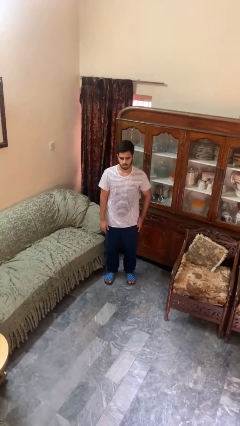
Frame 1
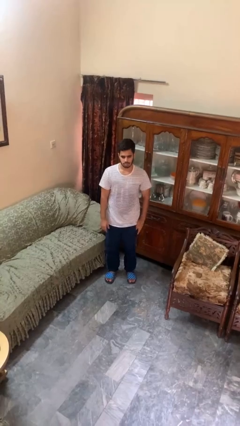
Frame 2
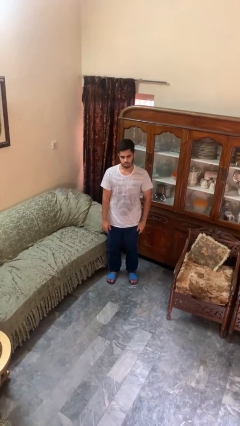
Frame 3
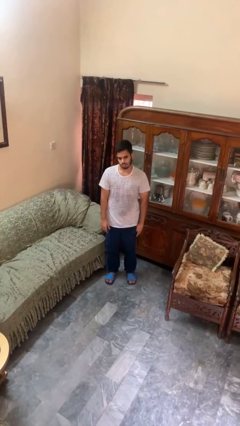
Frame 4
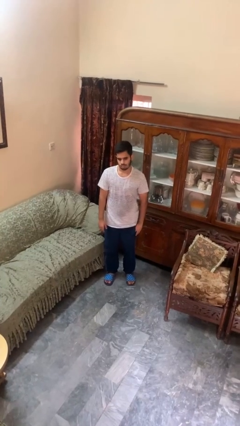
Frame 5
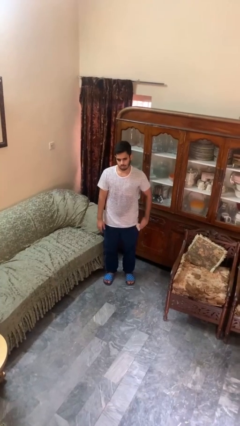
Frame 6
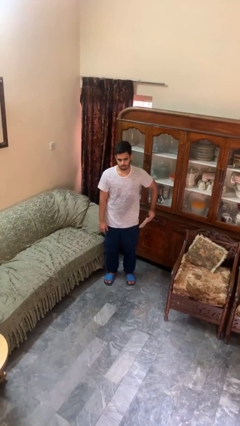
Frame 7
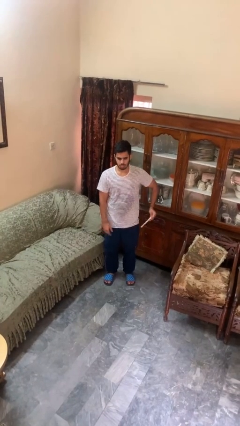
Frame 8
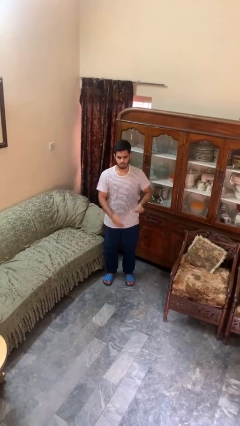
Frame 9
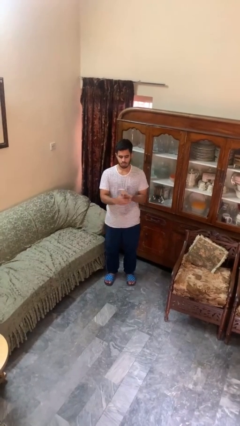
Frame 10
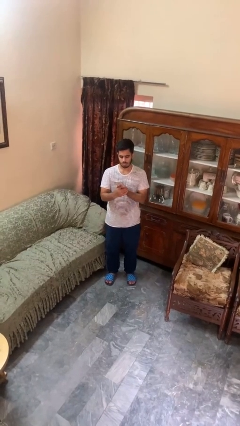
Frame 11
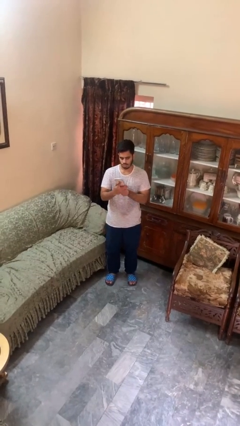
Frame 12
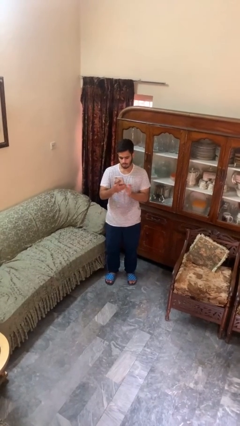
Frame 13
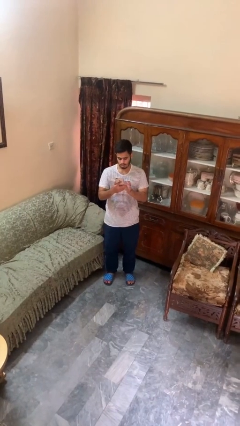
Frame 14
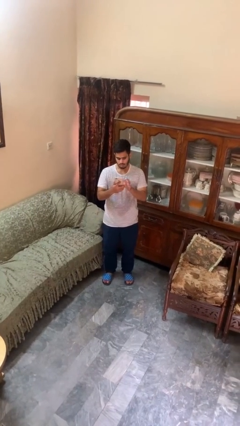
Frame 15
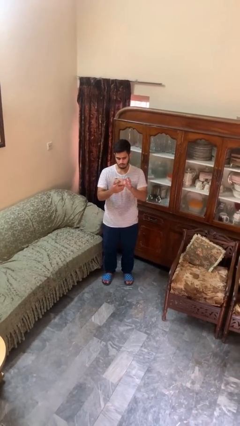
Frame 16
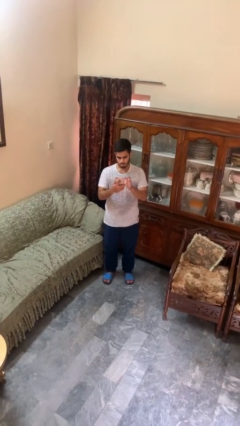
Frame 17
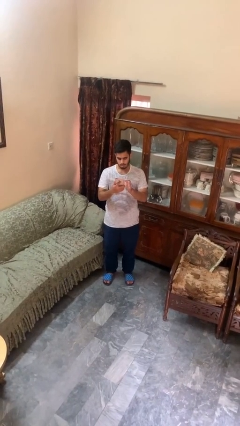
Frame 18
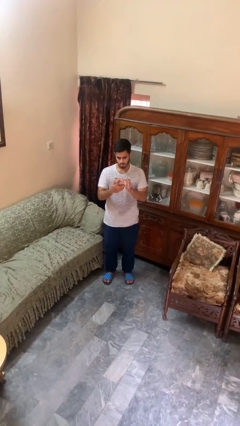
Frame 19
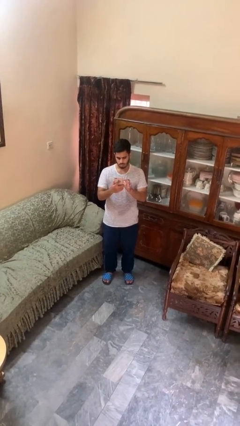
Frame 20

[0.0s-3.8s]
person takes phone from pocket

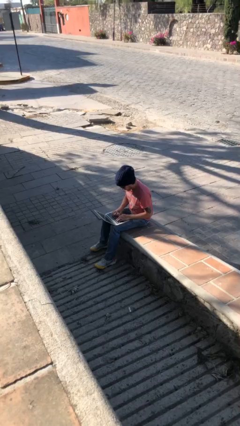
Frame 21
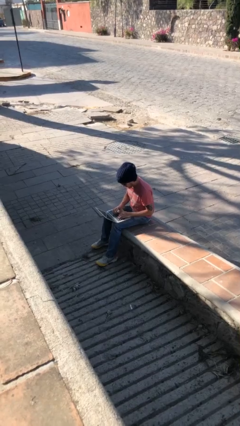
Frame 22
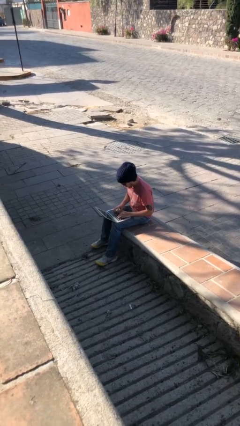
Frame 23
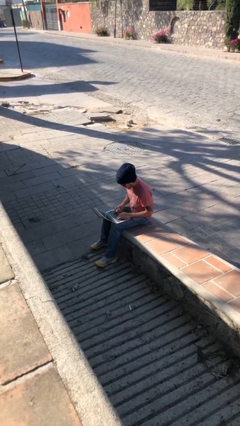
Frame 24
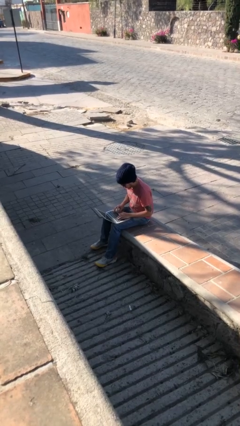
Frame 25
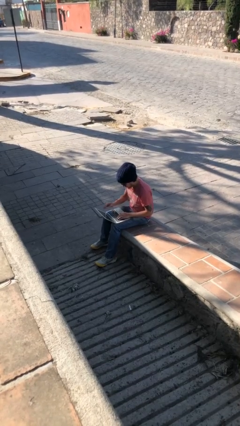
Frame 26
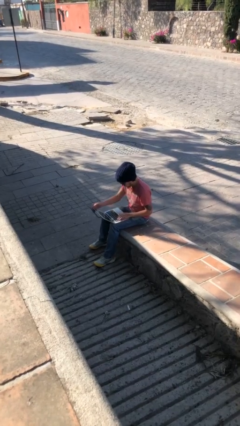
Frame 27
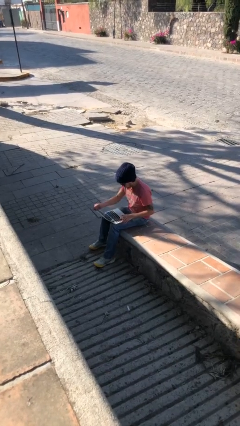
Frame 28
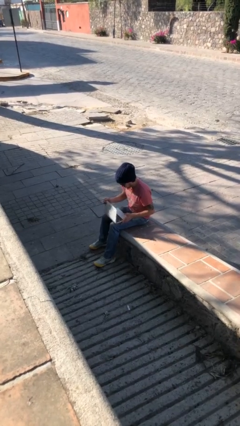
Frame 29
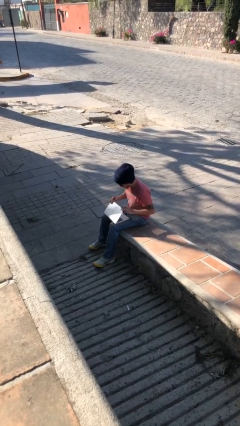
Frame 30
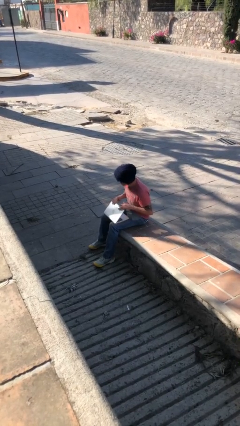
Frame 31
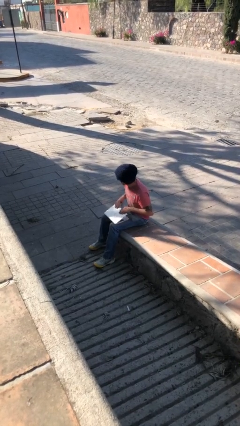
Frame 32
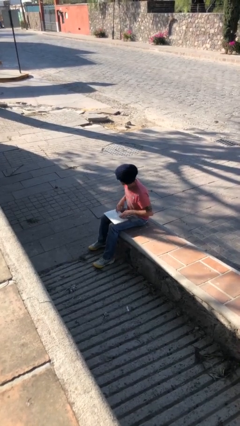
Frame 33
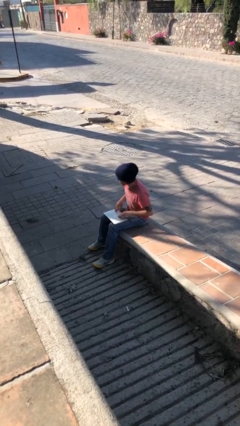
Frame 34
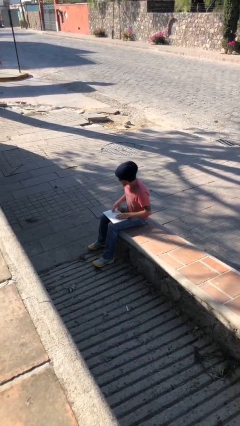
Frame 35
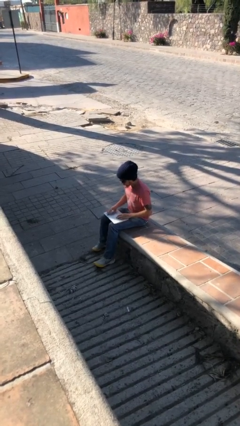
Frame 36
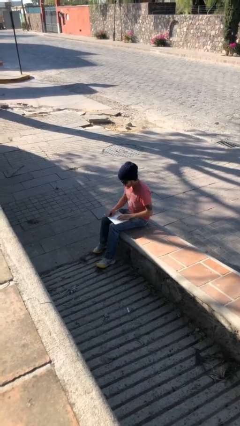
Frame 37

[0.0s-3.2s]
person interacts with laptop

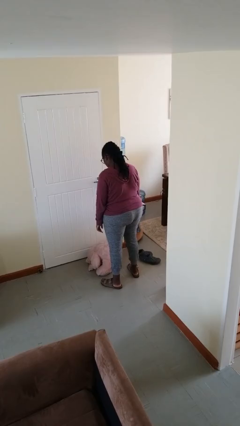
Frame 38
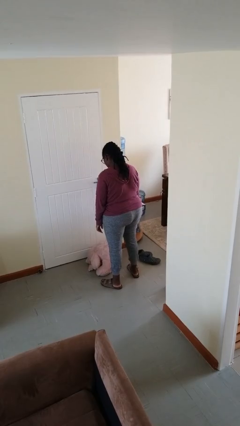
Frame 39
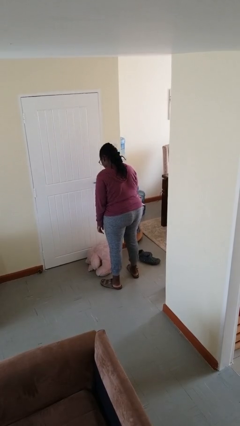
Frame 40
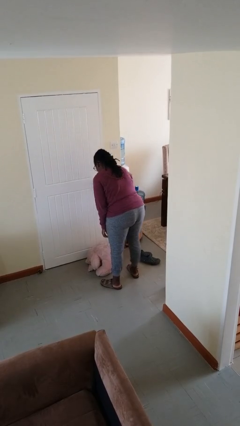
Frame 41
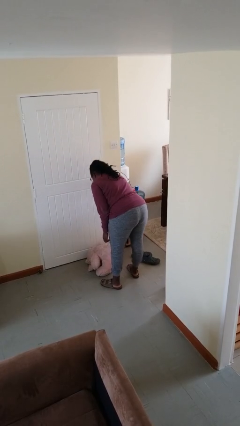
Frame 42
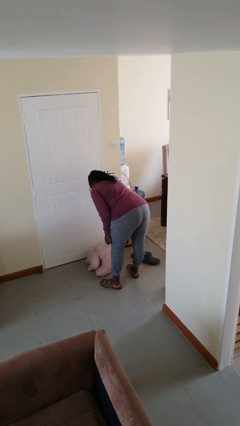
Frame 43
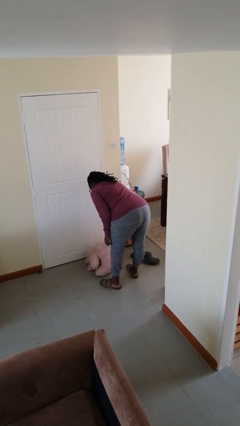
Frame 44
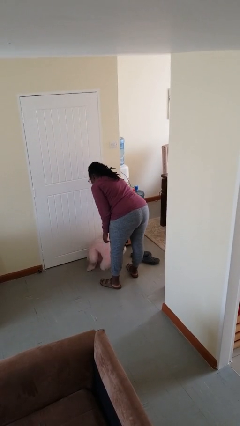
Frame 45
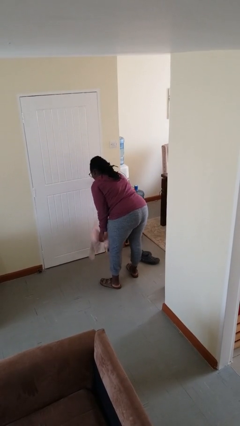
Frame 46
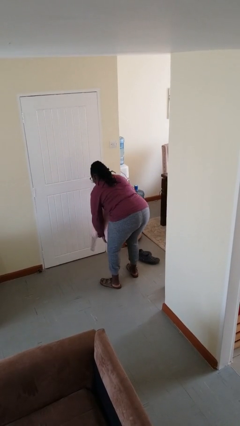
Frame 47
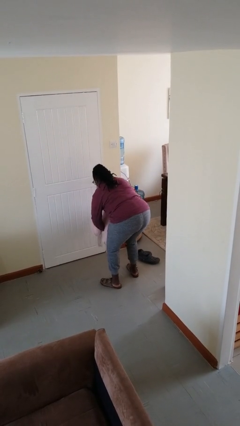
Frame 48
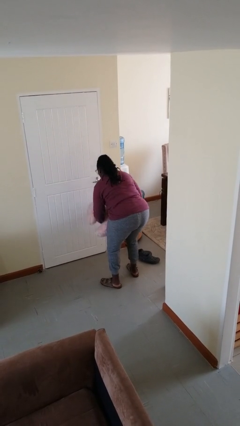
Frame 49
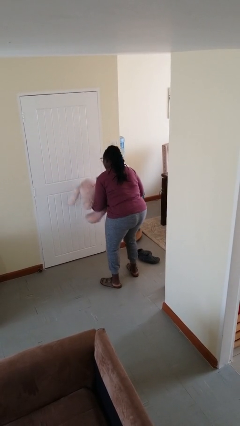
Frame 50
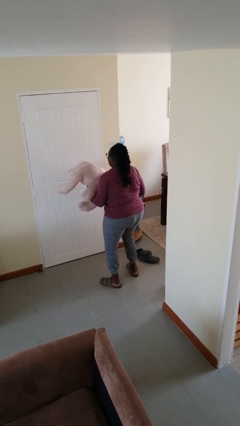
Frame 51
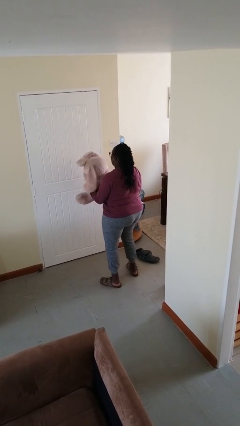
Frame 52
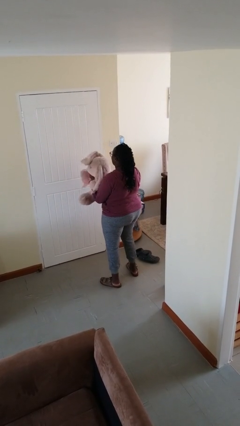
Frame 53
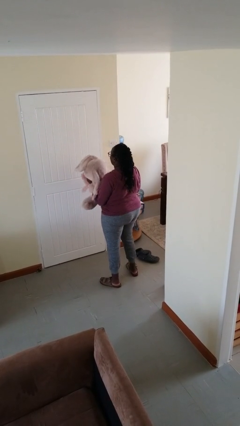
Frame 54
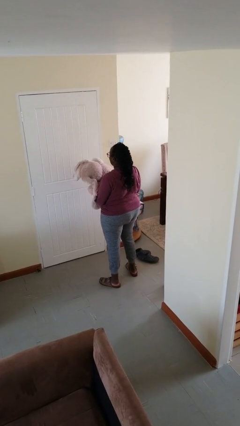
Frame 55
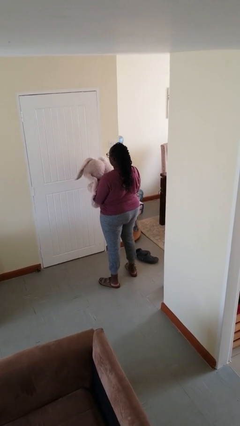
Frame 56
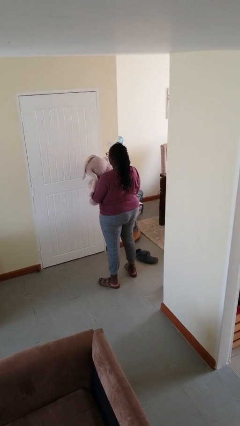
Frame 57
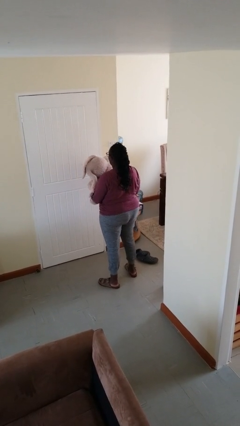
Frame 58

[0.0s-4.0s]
person picks up object from floor

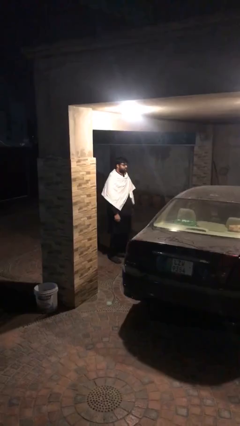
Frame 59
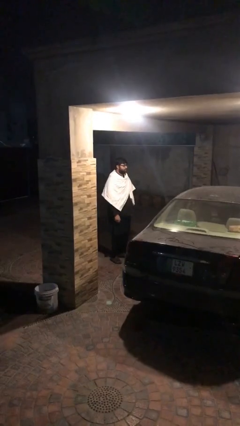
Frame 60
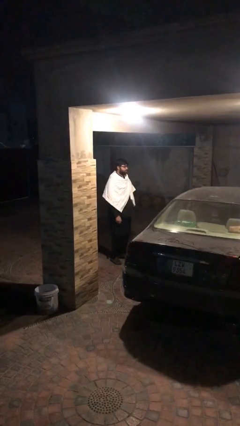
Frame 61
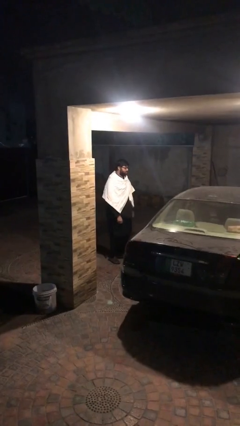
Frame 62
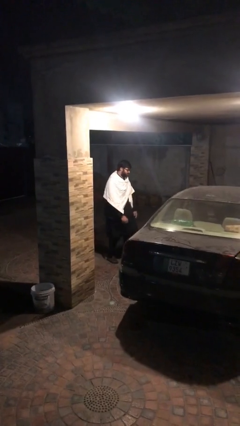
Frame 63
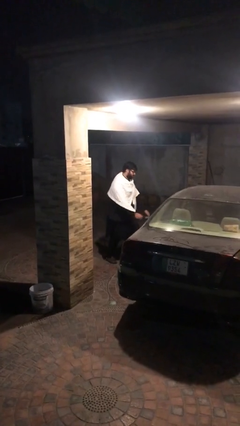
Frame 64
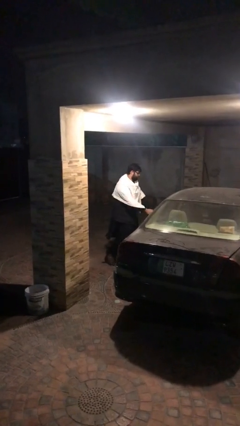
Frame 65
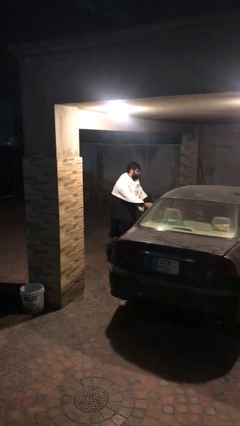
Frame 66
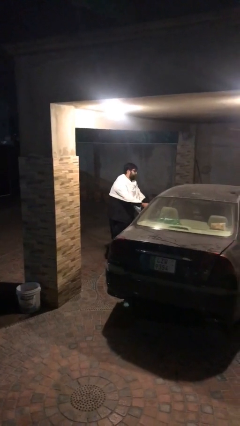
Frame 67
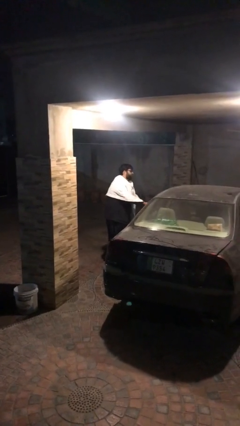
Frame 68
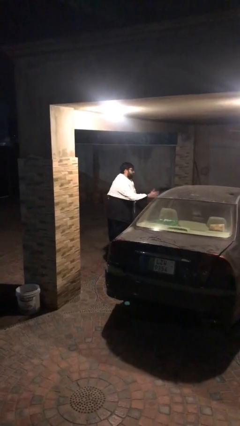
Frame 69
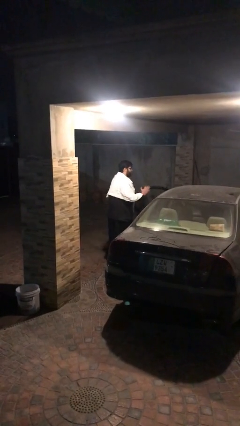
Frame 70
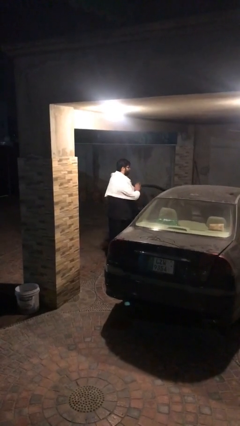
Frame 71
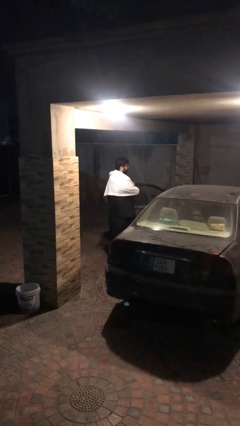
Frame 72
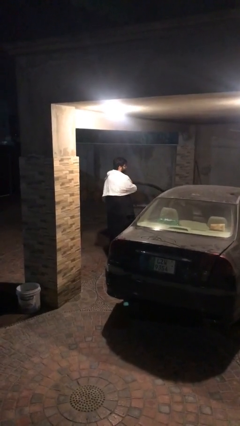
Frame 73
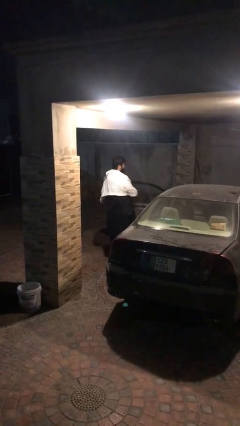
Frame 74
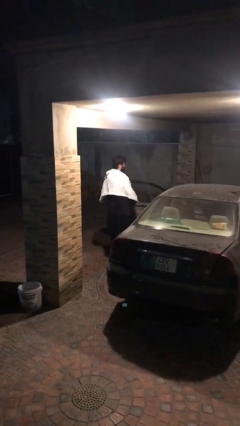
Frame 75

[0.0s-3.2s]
person opens car door

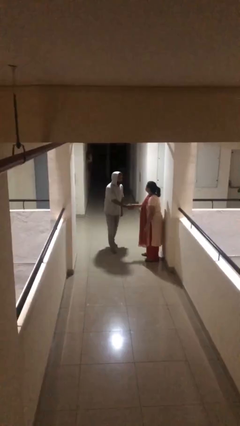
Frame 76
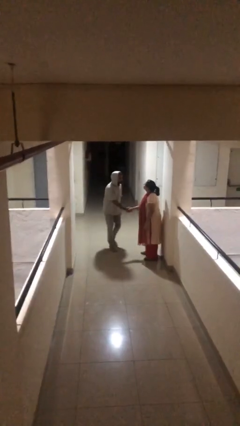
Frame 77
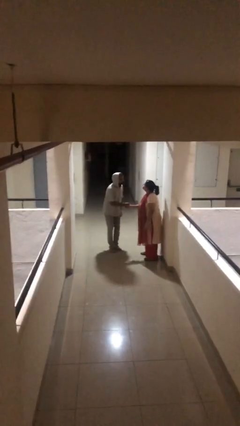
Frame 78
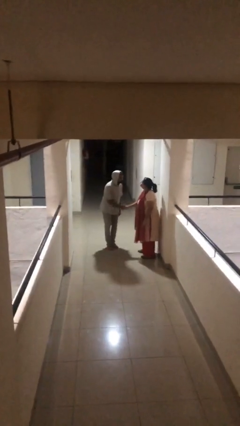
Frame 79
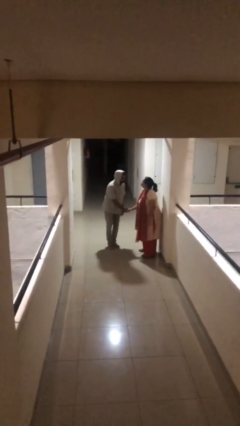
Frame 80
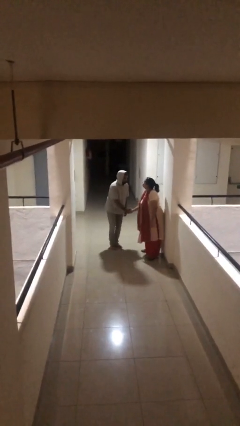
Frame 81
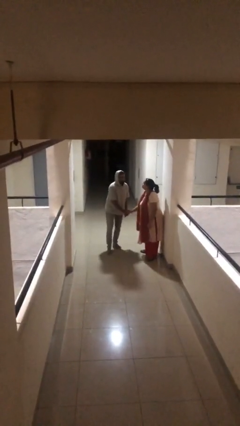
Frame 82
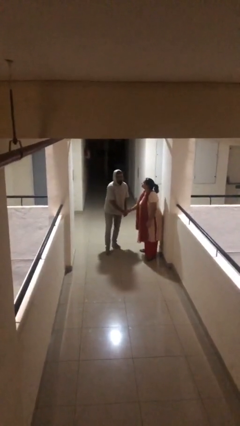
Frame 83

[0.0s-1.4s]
person shakes hand

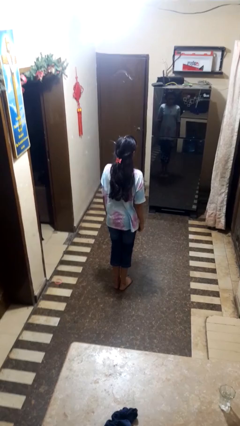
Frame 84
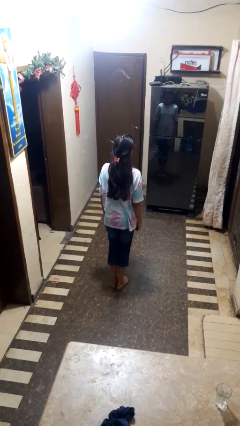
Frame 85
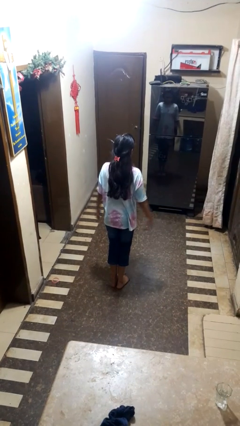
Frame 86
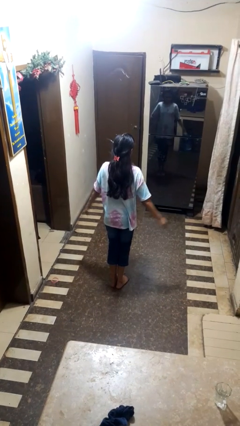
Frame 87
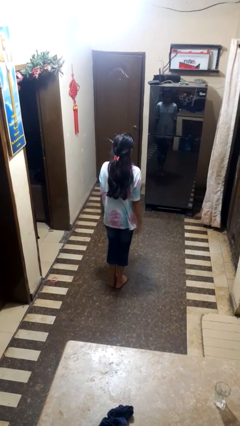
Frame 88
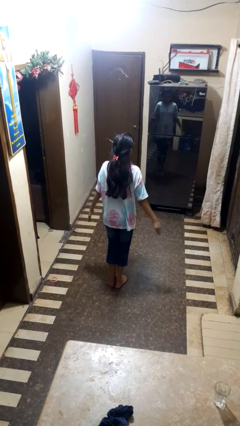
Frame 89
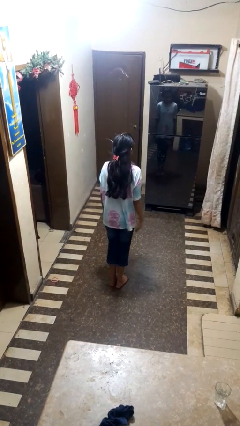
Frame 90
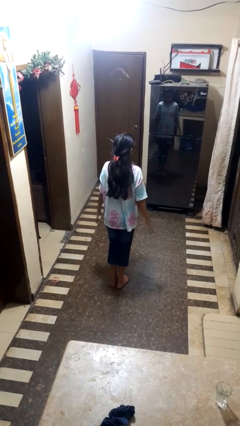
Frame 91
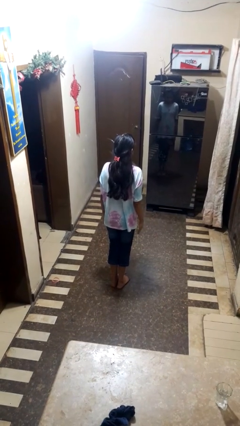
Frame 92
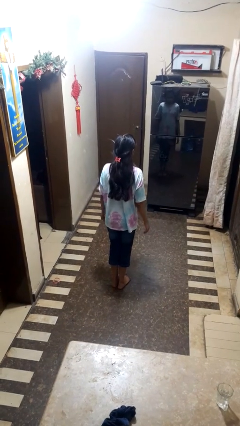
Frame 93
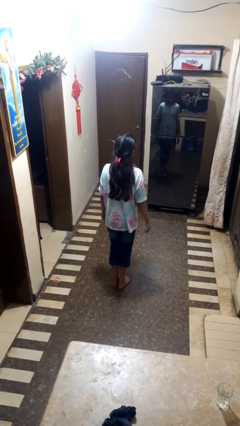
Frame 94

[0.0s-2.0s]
person slaps hands on thighs

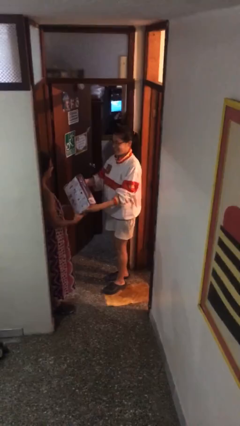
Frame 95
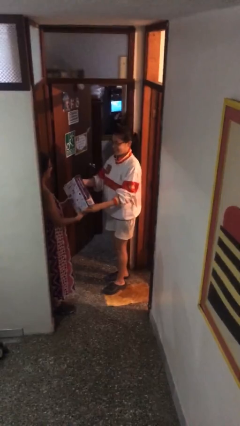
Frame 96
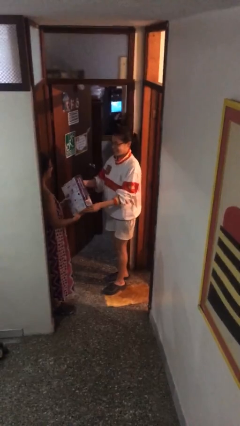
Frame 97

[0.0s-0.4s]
person transfers object to person
